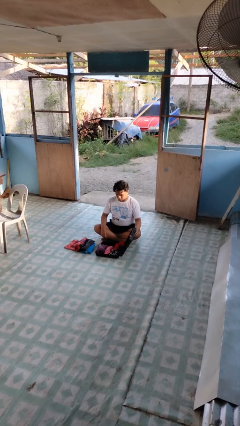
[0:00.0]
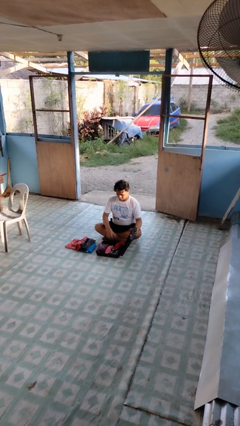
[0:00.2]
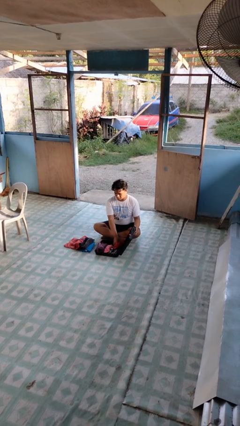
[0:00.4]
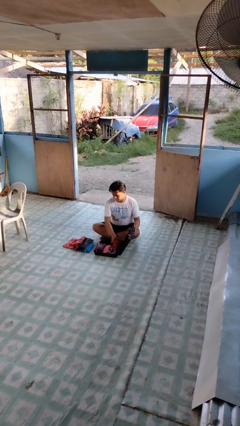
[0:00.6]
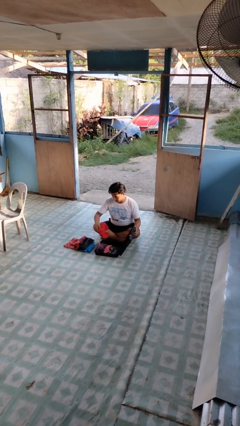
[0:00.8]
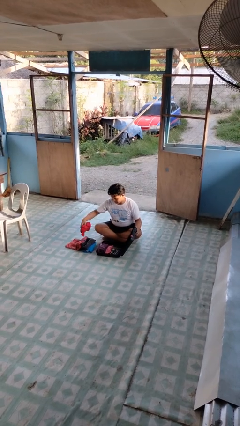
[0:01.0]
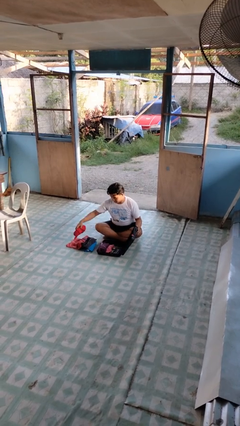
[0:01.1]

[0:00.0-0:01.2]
person unloads clothes from suitcase

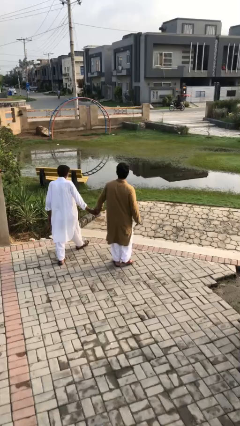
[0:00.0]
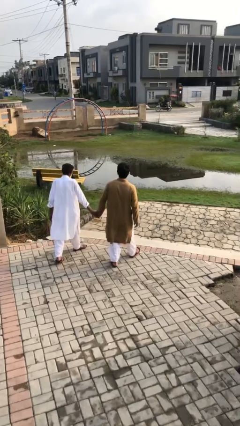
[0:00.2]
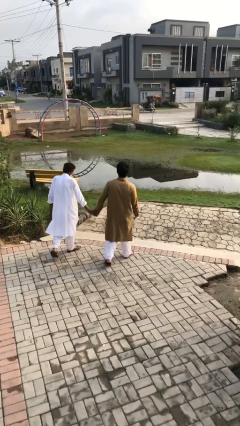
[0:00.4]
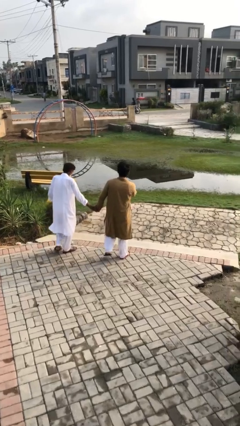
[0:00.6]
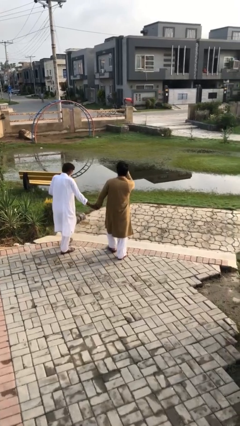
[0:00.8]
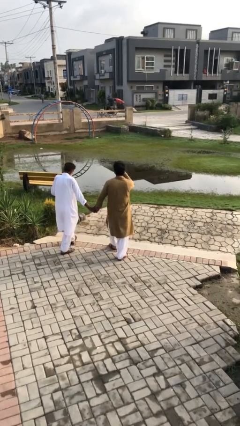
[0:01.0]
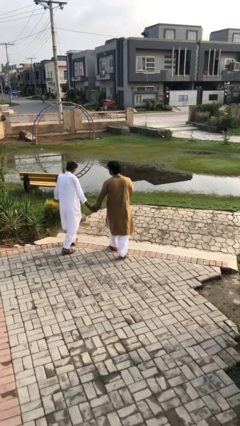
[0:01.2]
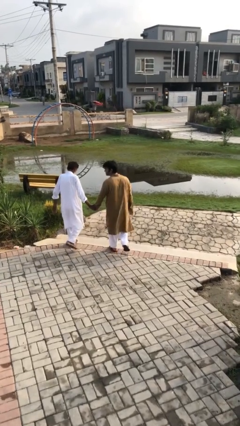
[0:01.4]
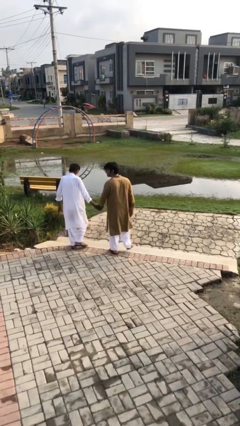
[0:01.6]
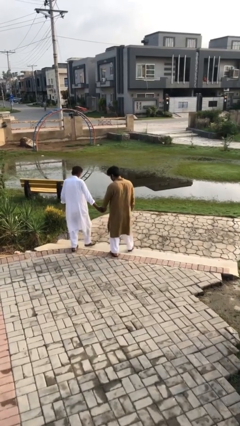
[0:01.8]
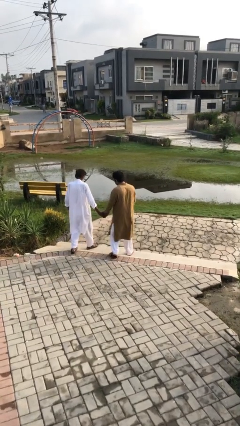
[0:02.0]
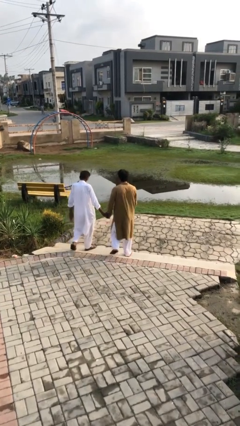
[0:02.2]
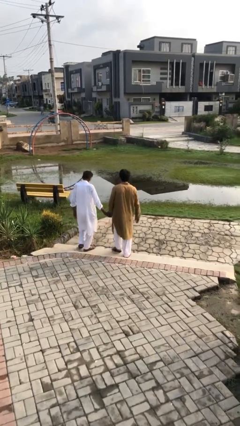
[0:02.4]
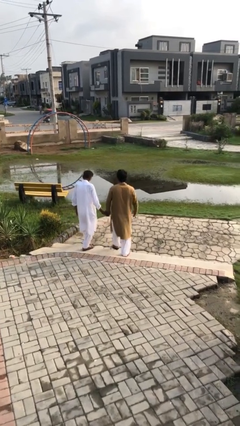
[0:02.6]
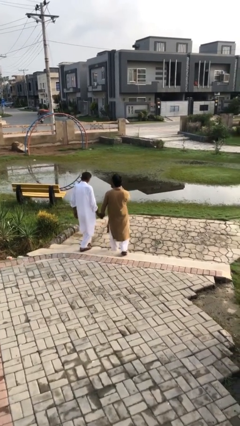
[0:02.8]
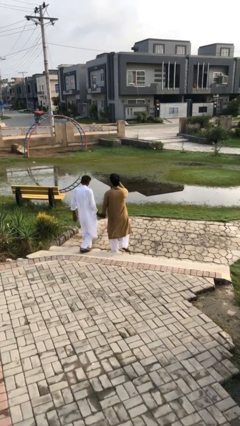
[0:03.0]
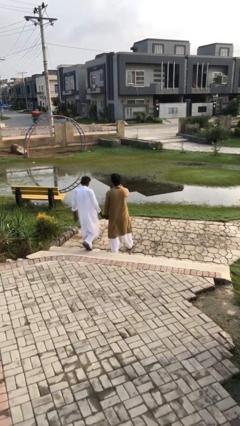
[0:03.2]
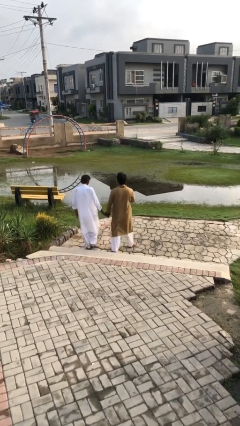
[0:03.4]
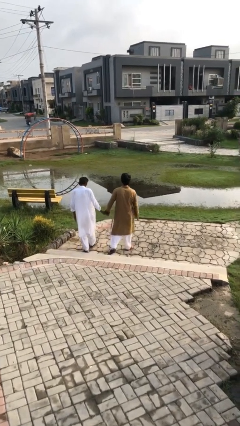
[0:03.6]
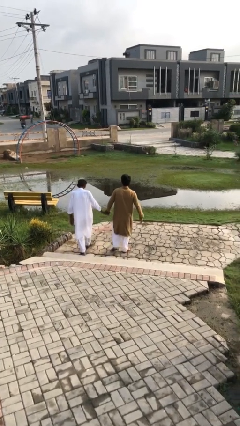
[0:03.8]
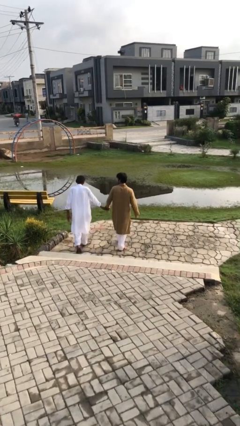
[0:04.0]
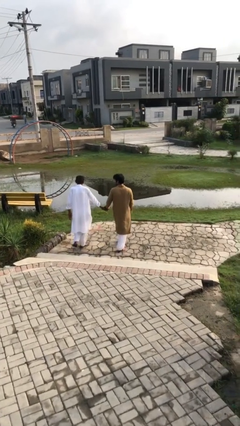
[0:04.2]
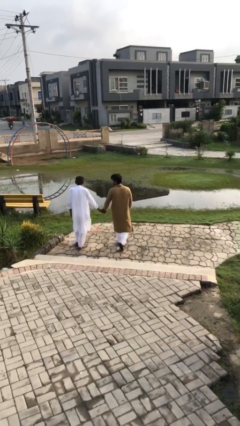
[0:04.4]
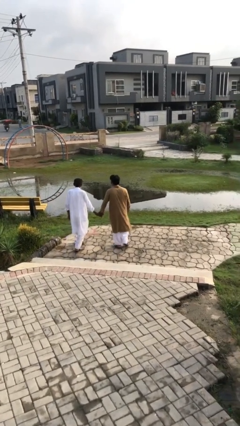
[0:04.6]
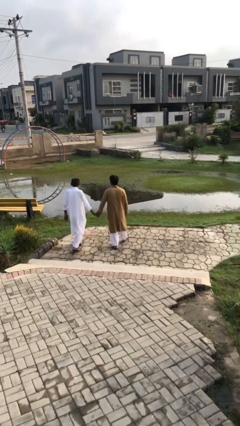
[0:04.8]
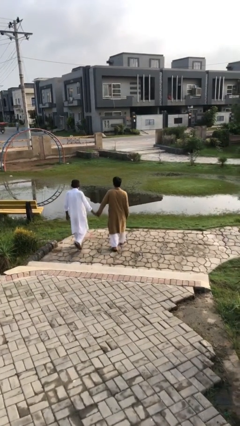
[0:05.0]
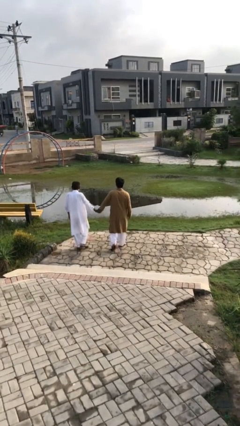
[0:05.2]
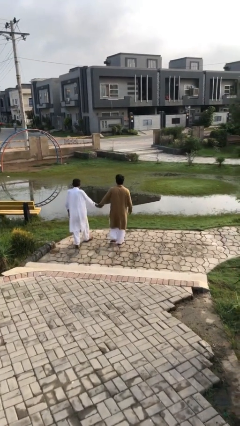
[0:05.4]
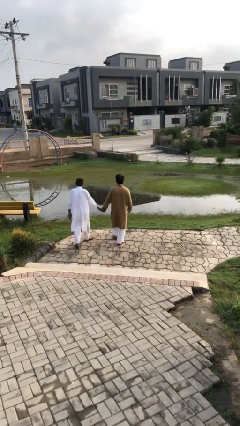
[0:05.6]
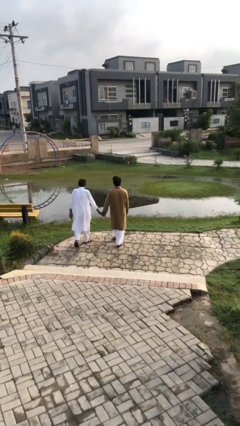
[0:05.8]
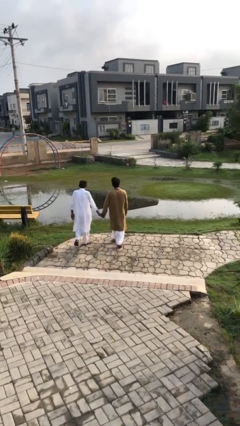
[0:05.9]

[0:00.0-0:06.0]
person holds hand

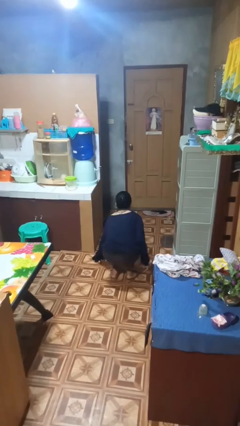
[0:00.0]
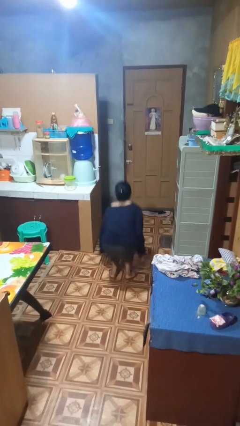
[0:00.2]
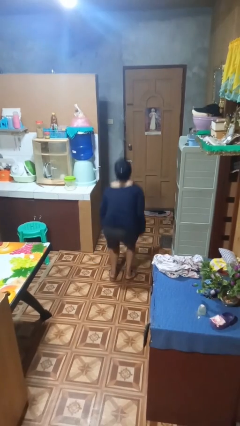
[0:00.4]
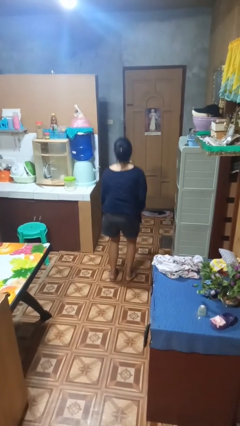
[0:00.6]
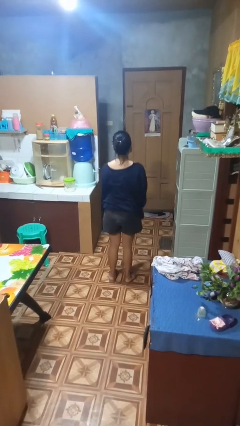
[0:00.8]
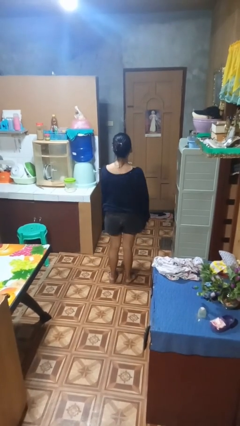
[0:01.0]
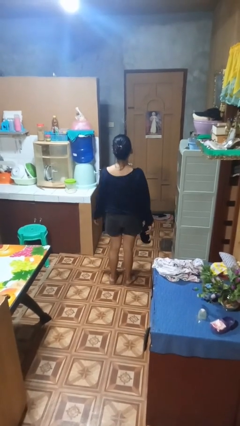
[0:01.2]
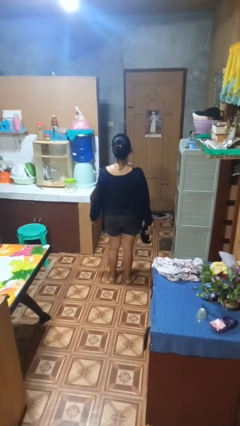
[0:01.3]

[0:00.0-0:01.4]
person picks up object from floor

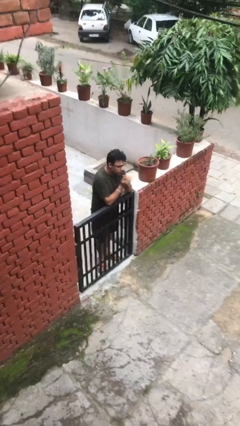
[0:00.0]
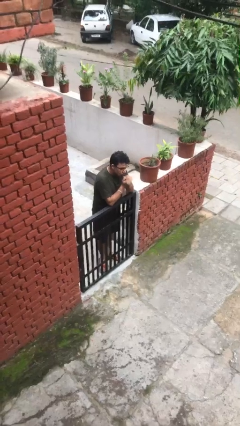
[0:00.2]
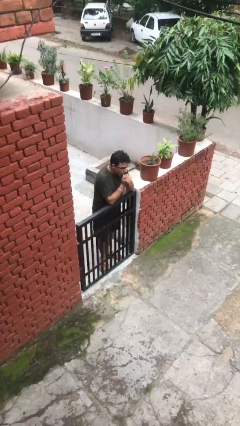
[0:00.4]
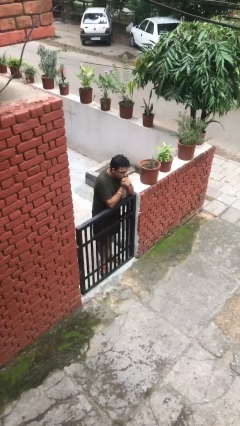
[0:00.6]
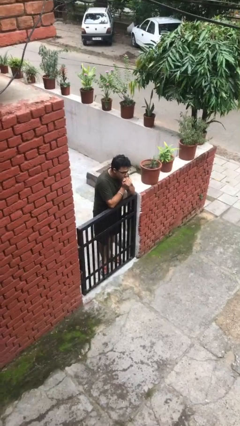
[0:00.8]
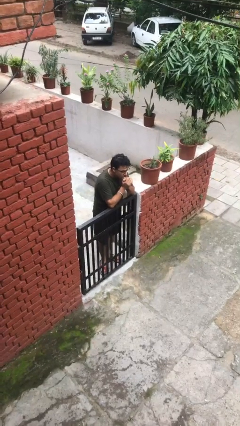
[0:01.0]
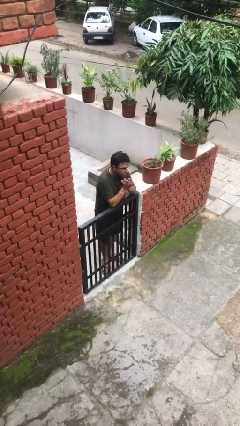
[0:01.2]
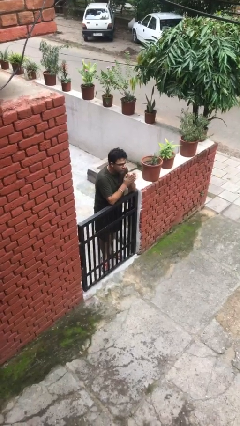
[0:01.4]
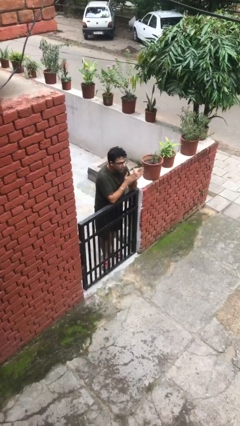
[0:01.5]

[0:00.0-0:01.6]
person blows into hands

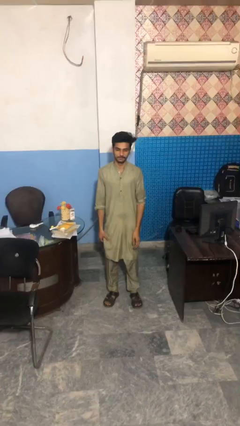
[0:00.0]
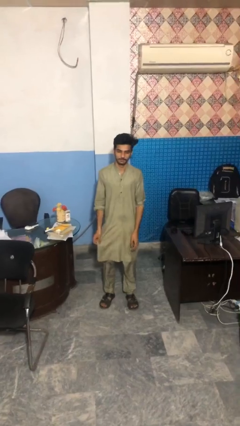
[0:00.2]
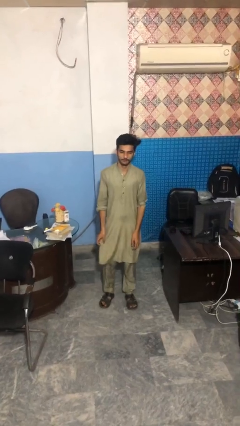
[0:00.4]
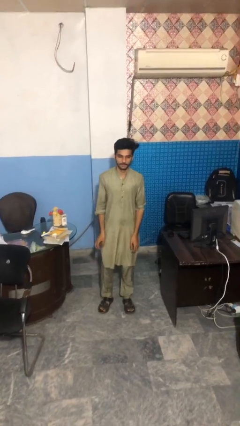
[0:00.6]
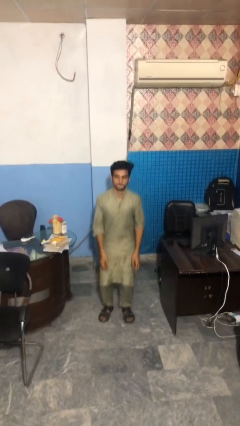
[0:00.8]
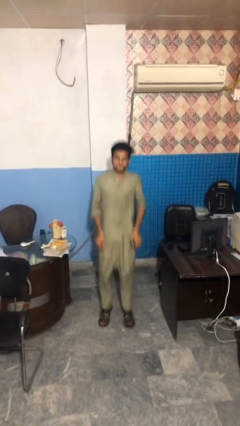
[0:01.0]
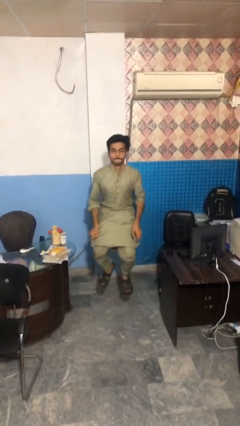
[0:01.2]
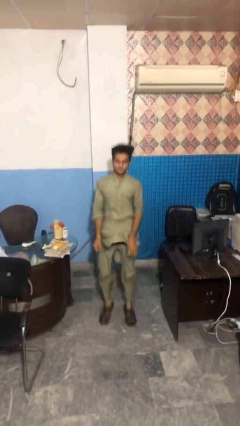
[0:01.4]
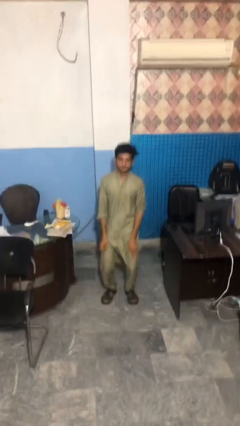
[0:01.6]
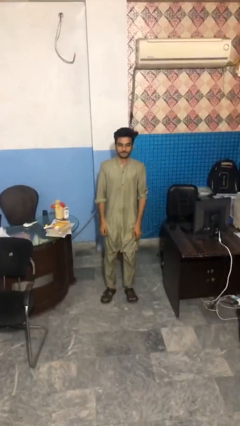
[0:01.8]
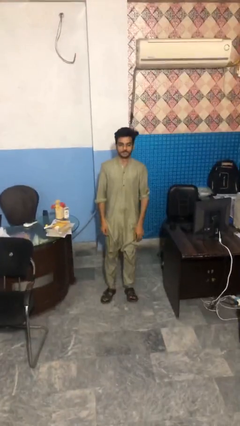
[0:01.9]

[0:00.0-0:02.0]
person jumps

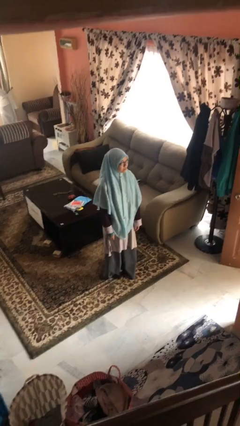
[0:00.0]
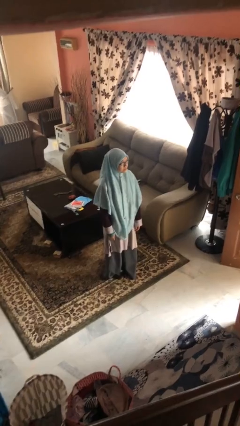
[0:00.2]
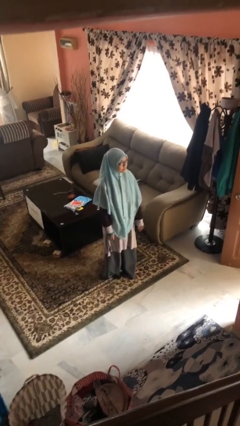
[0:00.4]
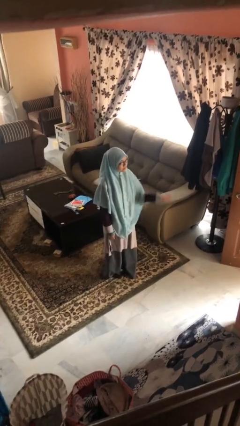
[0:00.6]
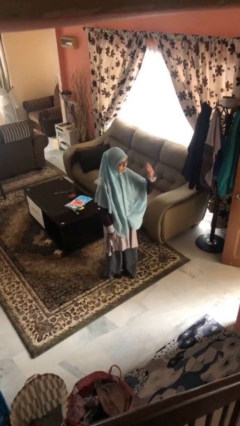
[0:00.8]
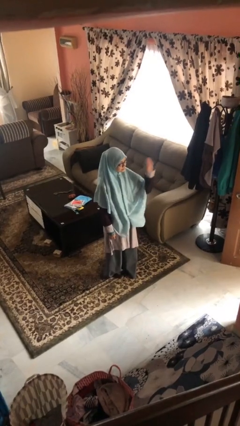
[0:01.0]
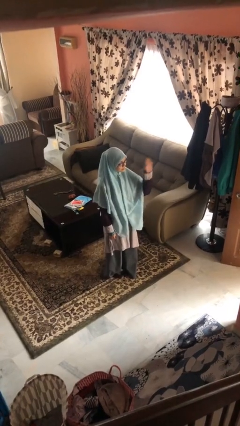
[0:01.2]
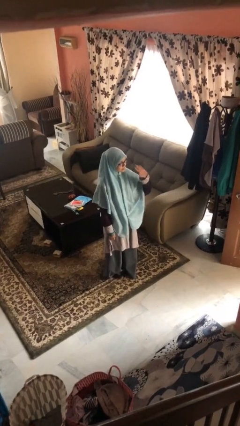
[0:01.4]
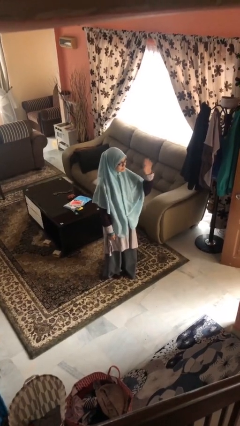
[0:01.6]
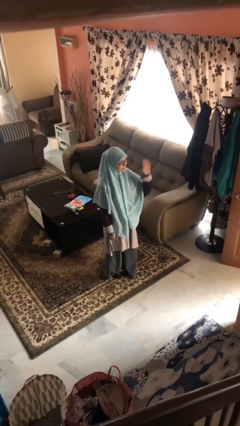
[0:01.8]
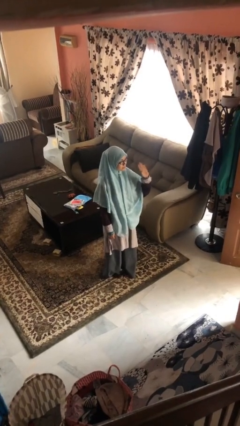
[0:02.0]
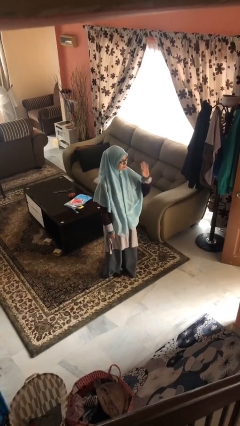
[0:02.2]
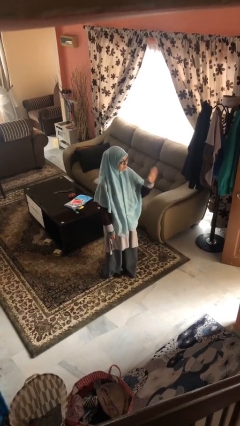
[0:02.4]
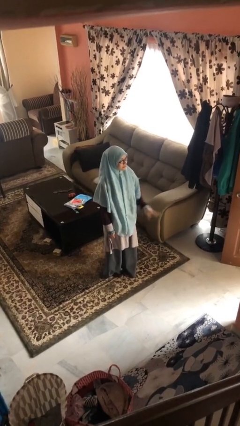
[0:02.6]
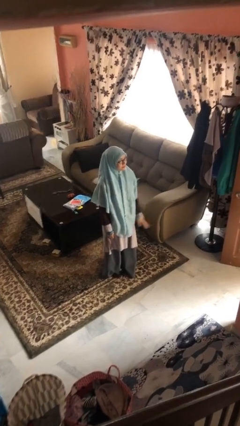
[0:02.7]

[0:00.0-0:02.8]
person waves at person

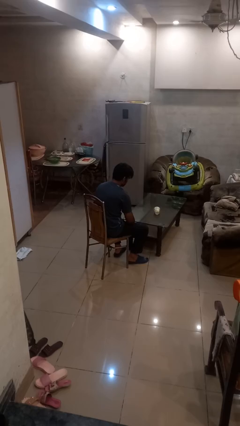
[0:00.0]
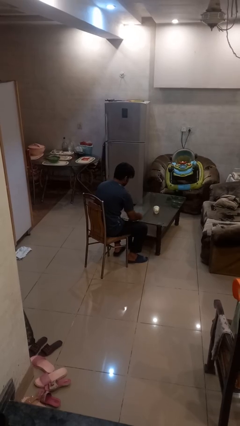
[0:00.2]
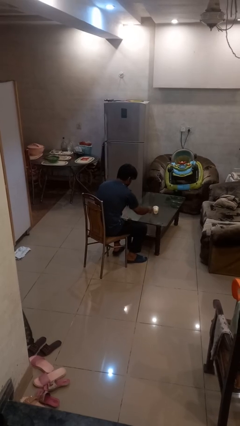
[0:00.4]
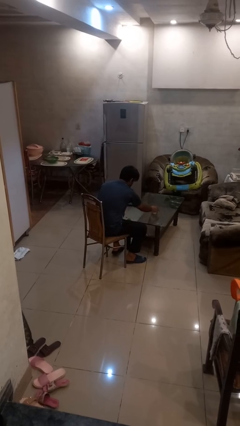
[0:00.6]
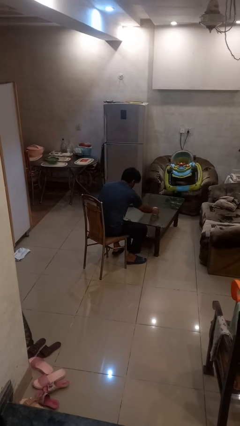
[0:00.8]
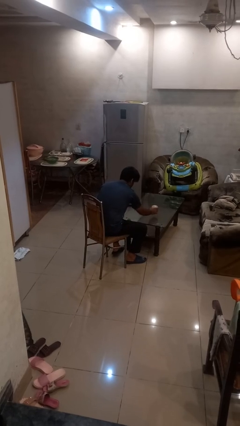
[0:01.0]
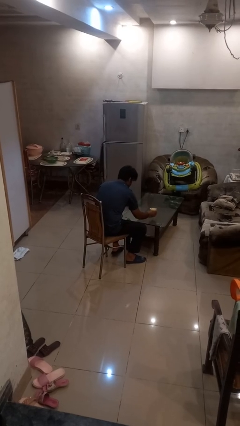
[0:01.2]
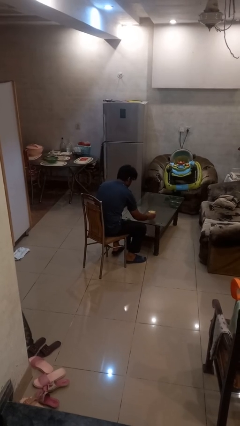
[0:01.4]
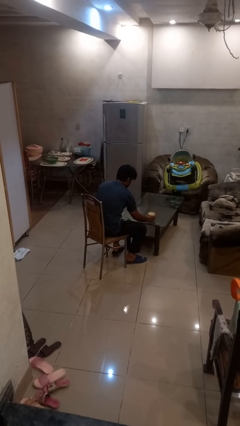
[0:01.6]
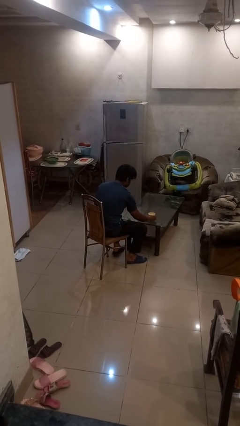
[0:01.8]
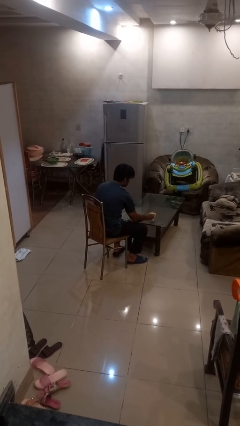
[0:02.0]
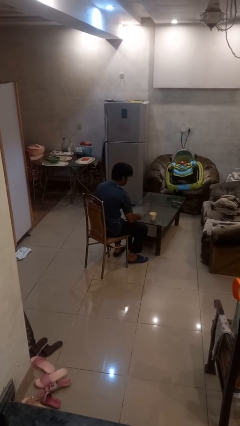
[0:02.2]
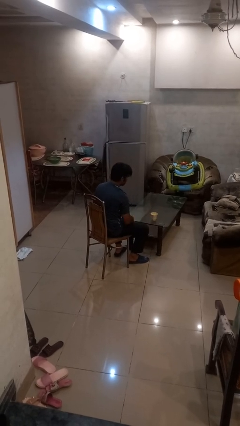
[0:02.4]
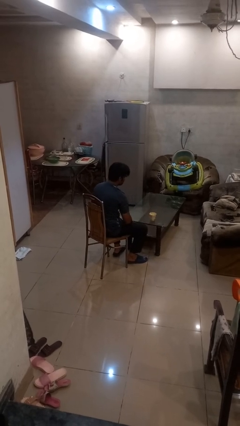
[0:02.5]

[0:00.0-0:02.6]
person sets upright glass
